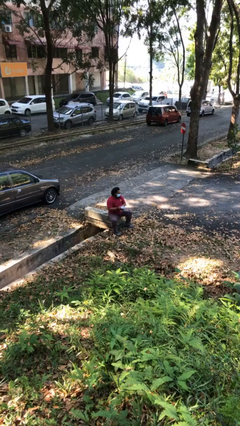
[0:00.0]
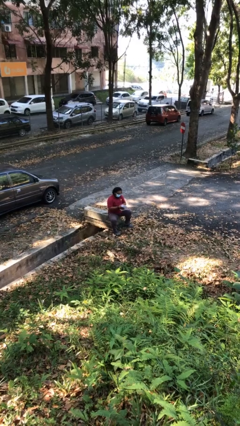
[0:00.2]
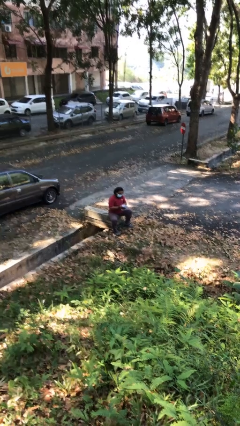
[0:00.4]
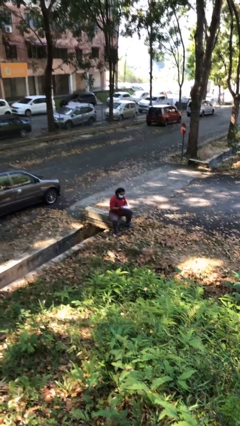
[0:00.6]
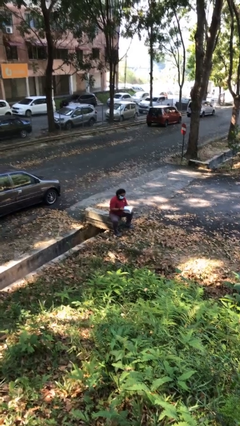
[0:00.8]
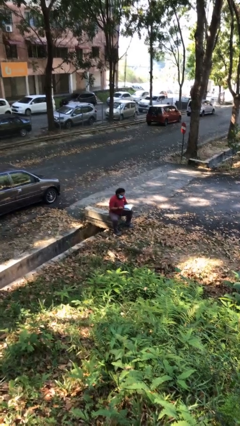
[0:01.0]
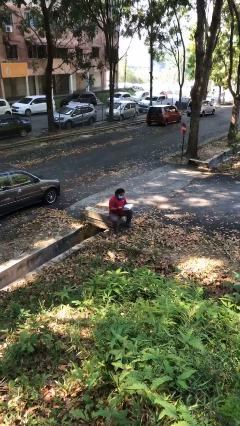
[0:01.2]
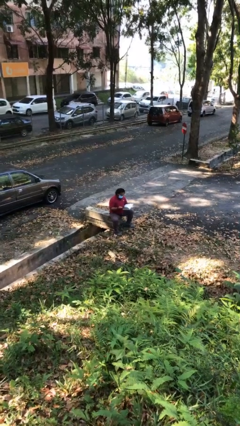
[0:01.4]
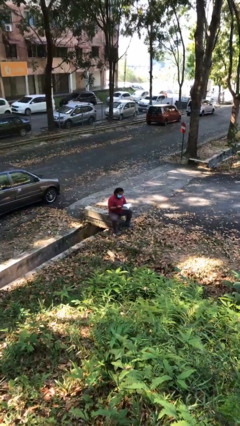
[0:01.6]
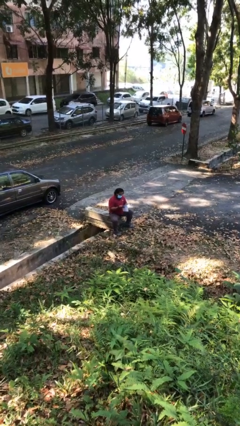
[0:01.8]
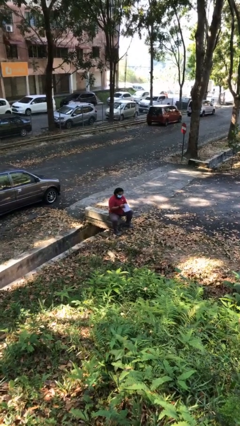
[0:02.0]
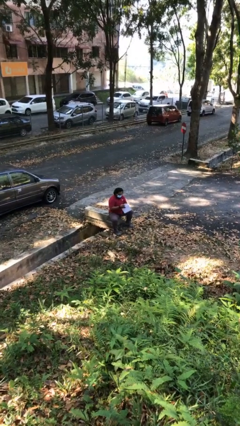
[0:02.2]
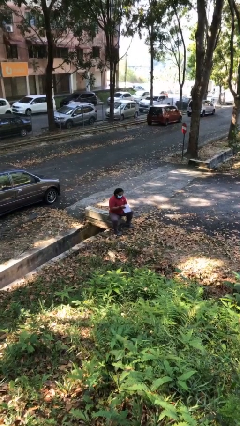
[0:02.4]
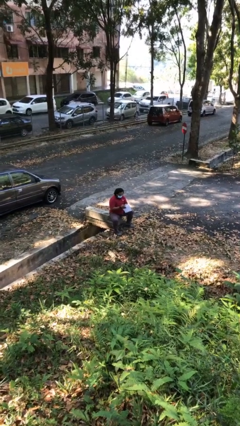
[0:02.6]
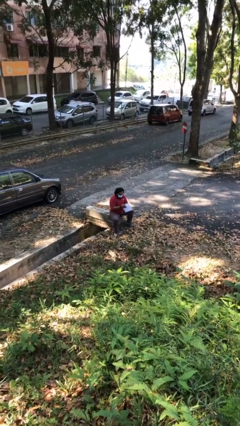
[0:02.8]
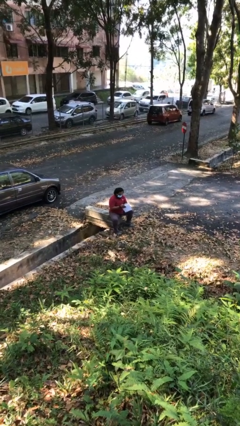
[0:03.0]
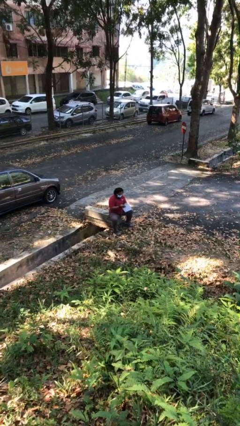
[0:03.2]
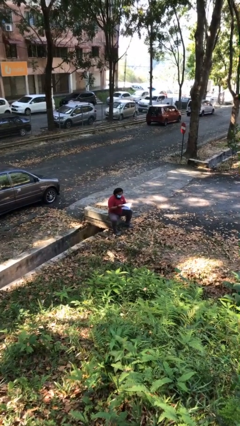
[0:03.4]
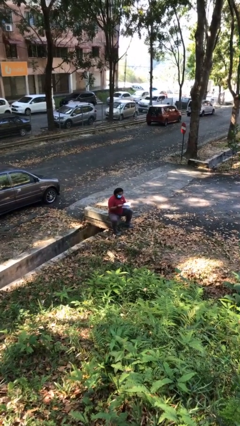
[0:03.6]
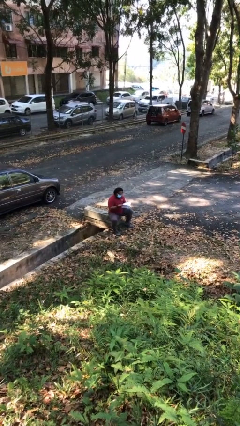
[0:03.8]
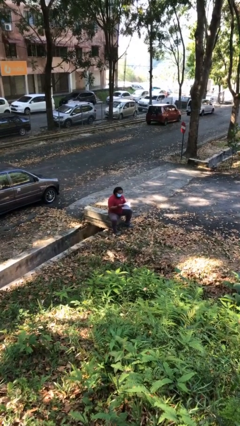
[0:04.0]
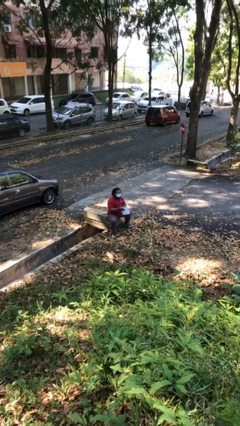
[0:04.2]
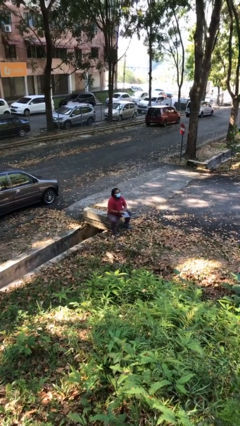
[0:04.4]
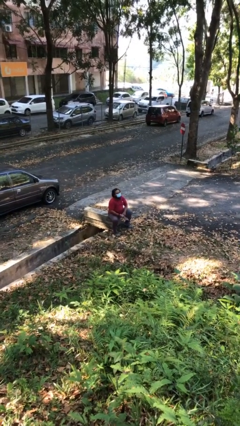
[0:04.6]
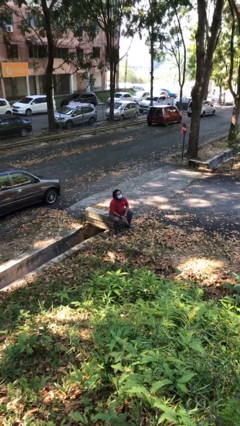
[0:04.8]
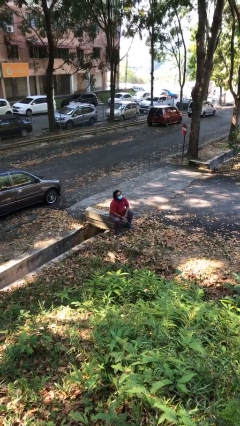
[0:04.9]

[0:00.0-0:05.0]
person reads document

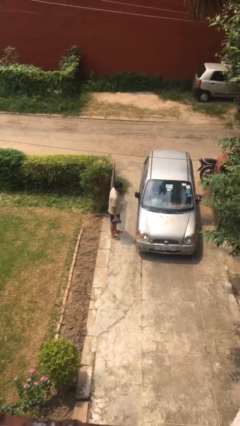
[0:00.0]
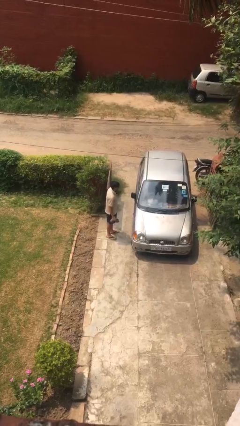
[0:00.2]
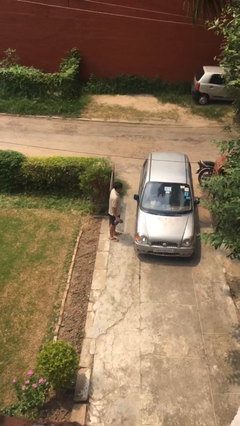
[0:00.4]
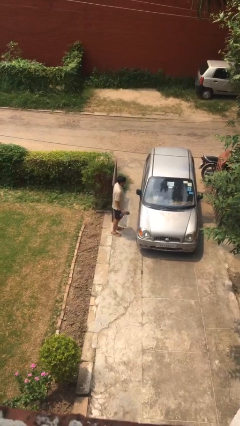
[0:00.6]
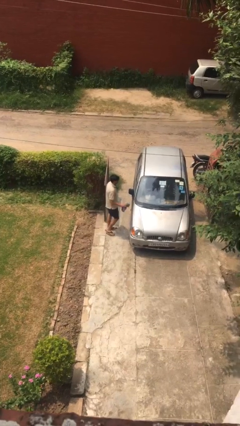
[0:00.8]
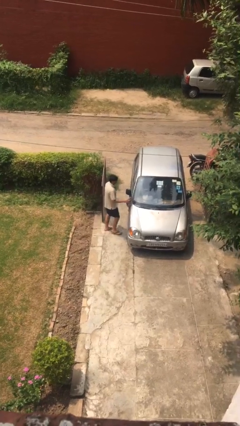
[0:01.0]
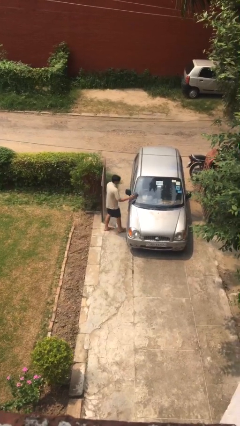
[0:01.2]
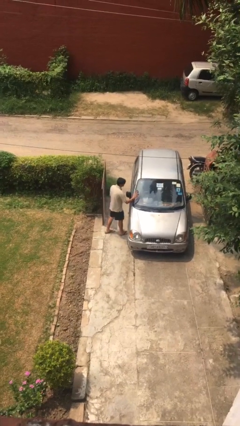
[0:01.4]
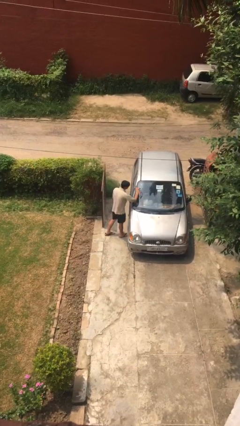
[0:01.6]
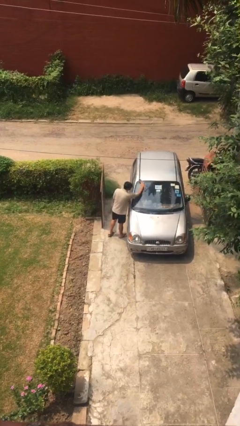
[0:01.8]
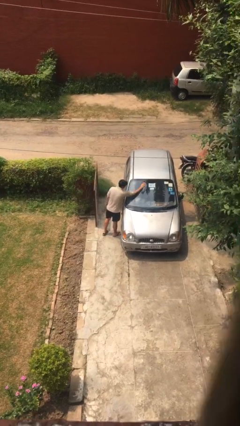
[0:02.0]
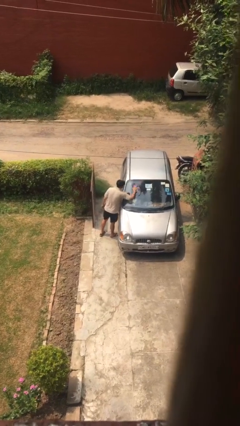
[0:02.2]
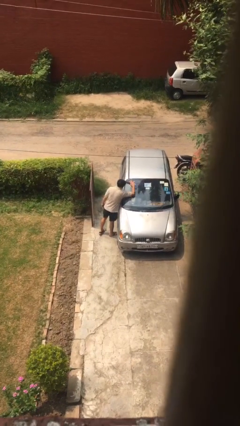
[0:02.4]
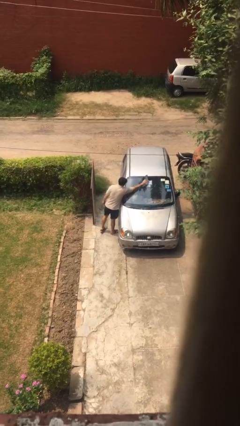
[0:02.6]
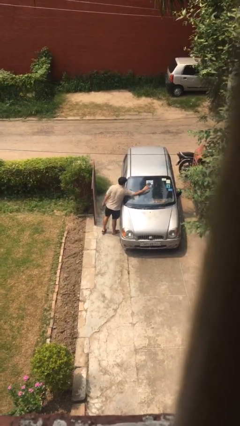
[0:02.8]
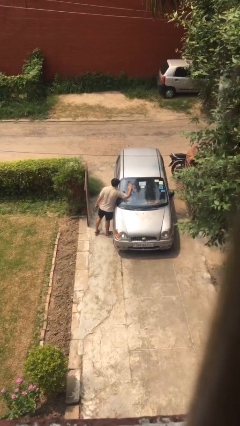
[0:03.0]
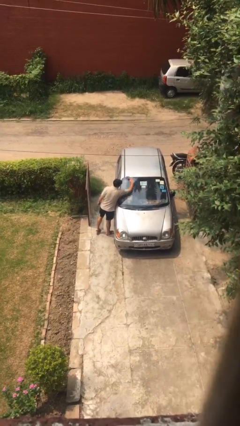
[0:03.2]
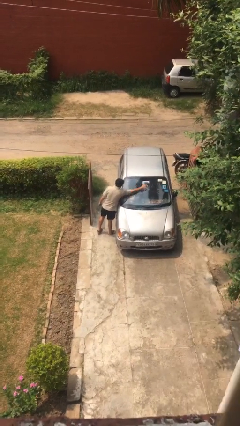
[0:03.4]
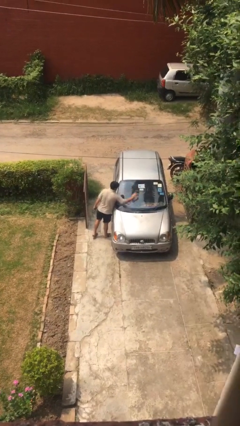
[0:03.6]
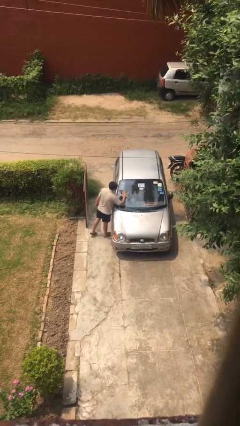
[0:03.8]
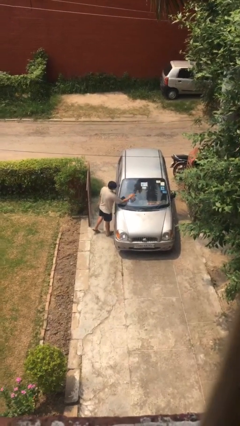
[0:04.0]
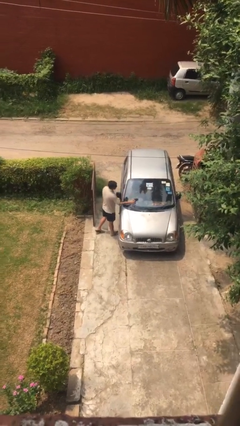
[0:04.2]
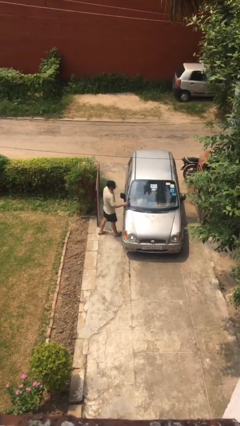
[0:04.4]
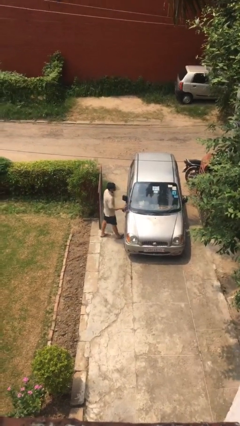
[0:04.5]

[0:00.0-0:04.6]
person polishes car with rag

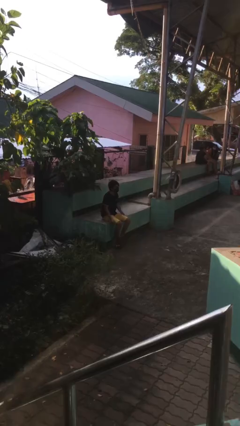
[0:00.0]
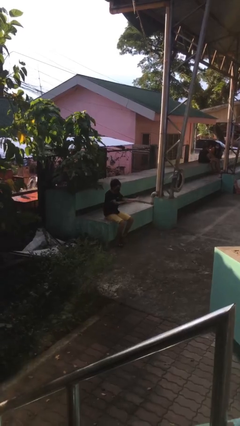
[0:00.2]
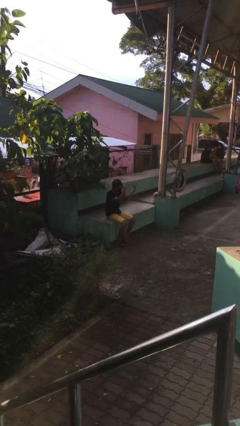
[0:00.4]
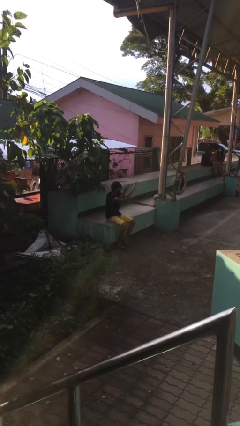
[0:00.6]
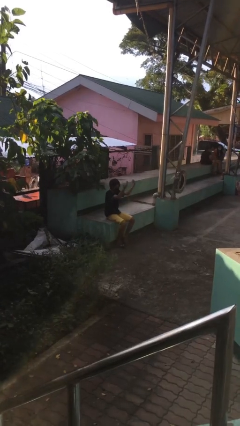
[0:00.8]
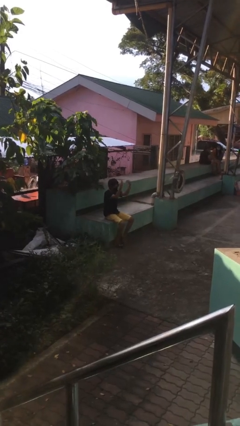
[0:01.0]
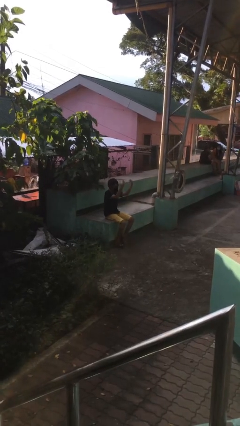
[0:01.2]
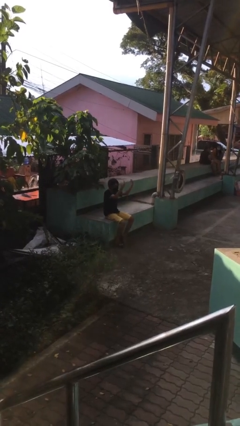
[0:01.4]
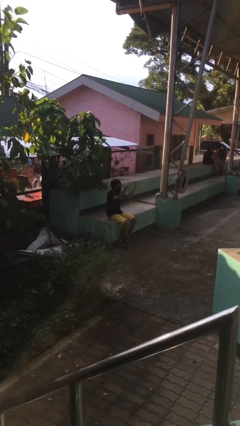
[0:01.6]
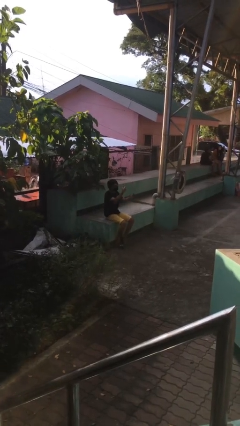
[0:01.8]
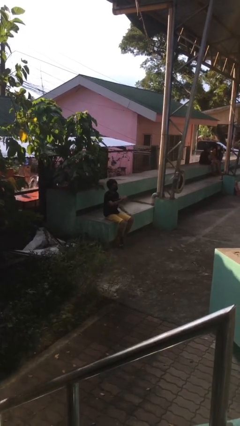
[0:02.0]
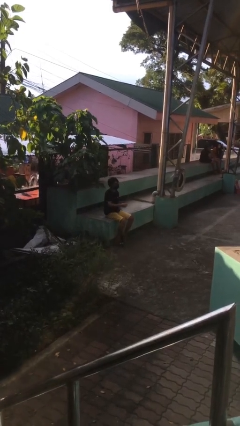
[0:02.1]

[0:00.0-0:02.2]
person gestures come here

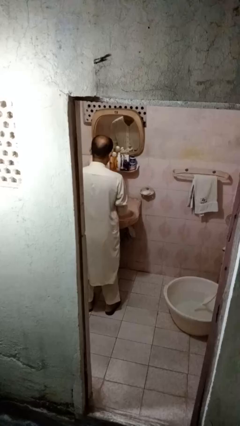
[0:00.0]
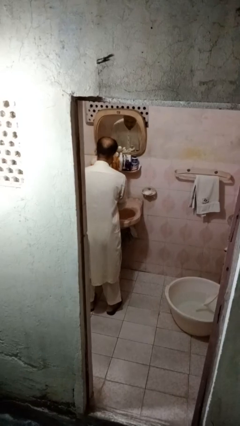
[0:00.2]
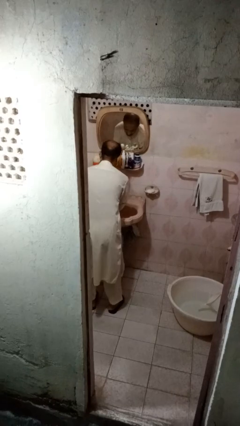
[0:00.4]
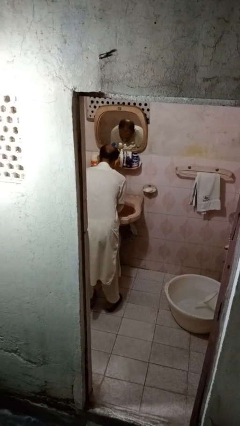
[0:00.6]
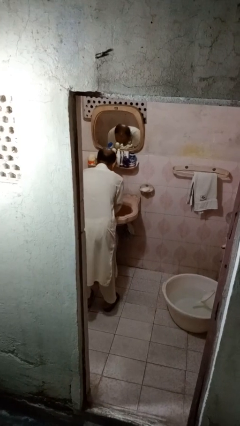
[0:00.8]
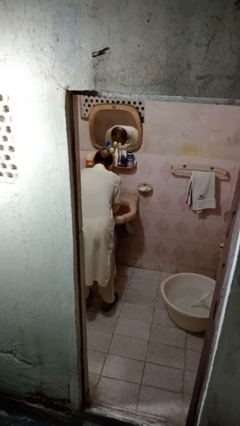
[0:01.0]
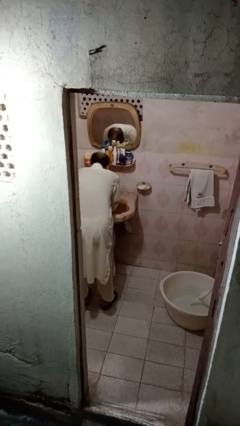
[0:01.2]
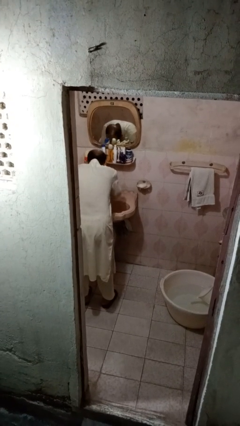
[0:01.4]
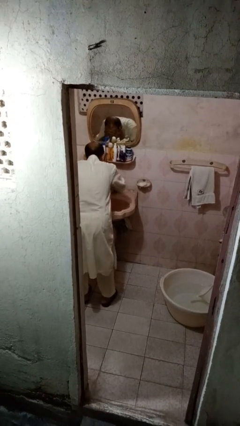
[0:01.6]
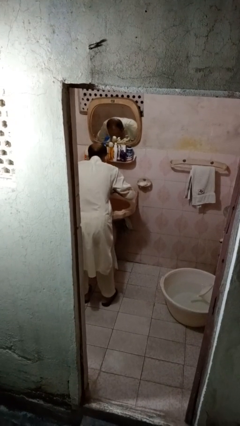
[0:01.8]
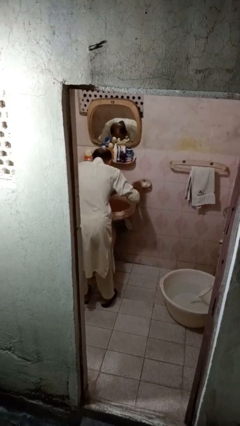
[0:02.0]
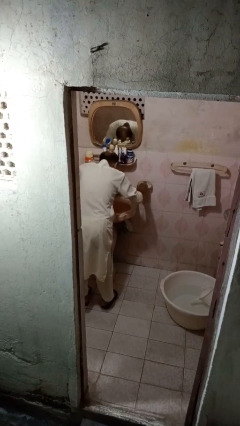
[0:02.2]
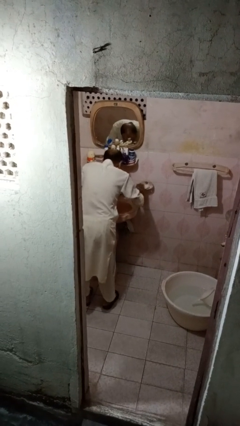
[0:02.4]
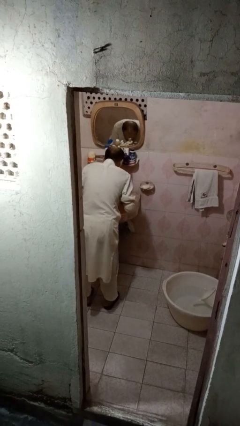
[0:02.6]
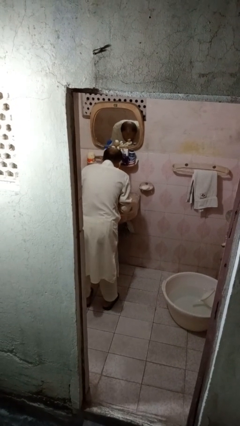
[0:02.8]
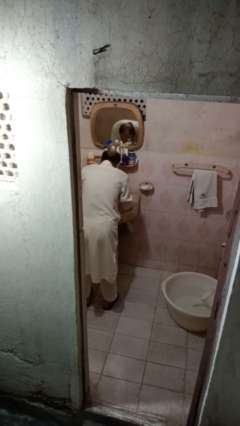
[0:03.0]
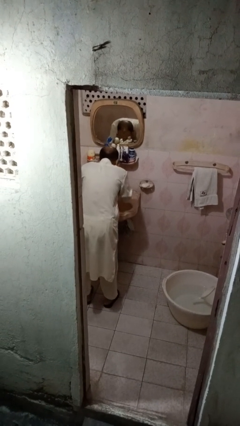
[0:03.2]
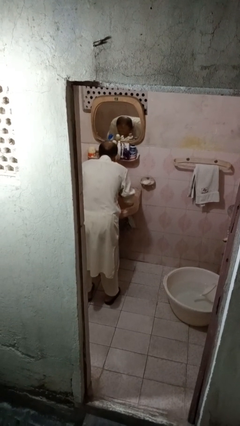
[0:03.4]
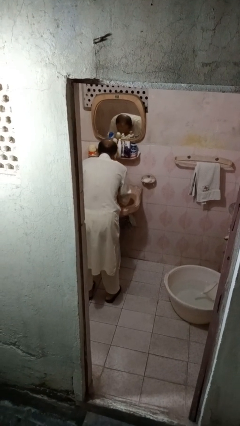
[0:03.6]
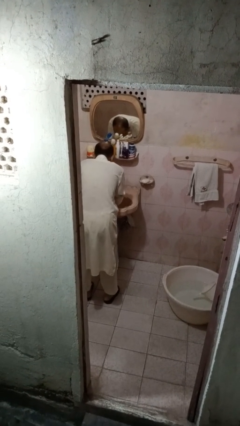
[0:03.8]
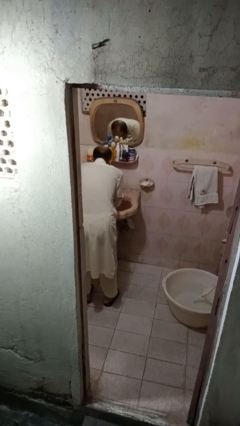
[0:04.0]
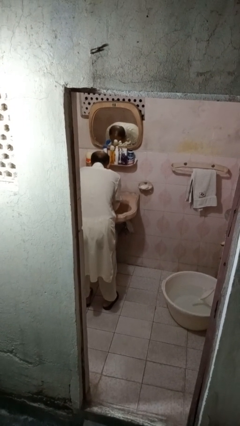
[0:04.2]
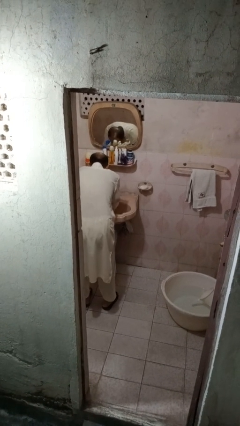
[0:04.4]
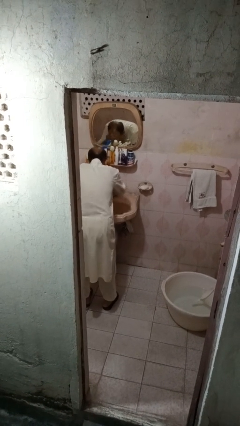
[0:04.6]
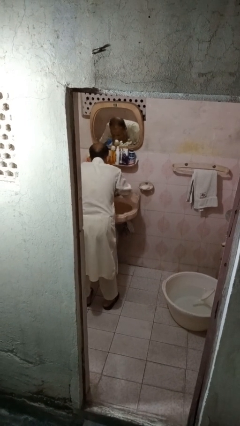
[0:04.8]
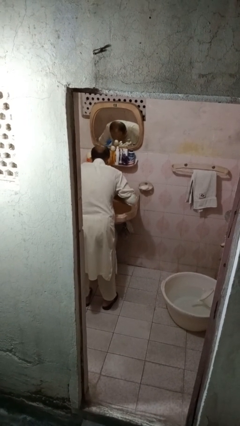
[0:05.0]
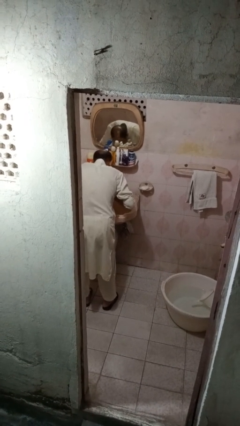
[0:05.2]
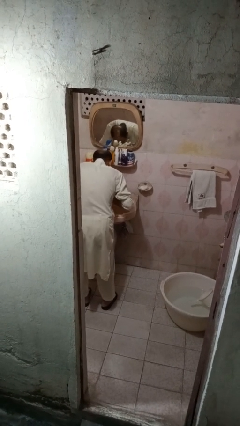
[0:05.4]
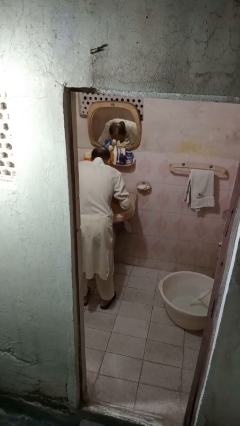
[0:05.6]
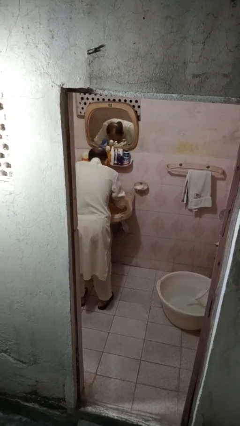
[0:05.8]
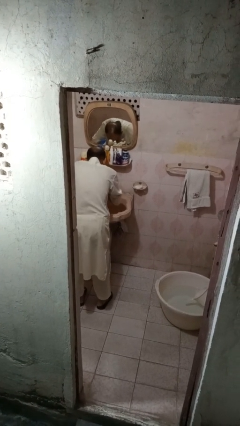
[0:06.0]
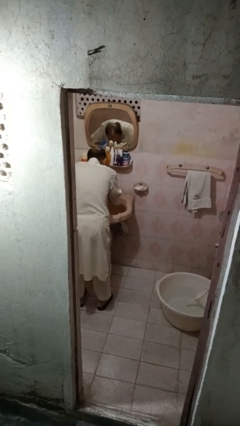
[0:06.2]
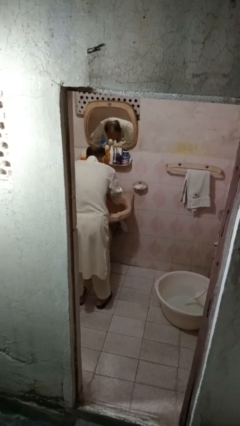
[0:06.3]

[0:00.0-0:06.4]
person washes face
